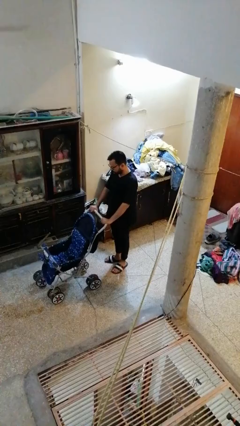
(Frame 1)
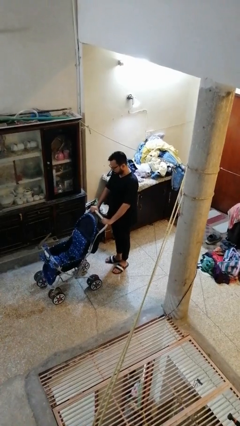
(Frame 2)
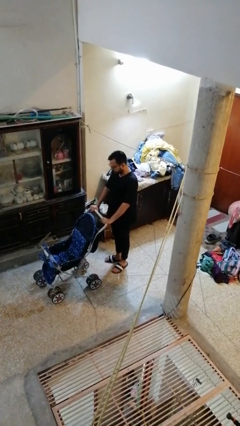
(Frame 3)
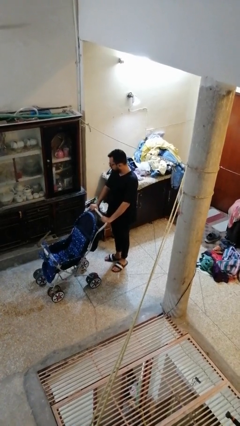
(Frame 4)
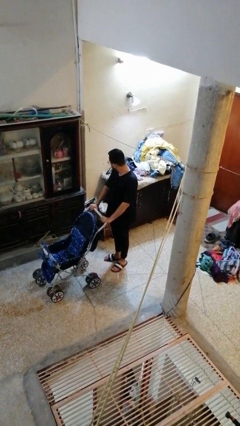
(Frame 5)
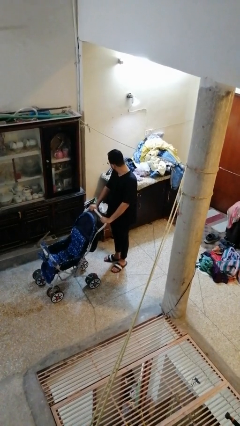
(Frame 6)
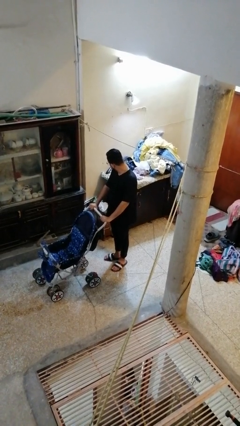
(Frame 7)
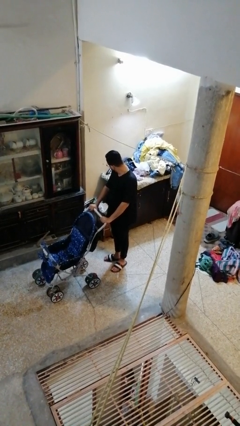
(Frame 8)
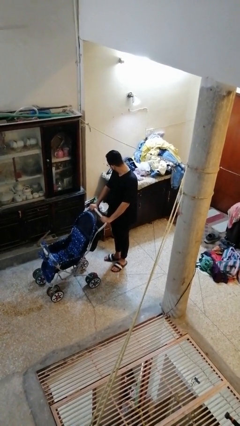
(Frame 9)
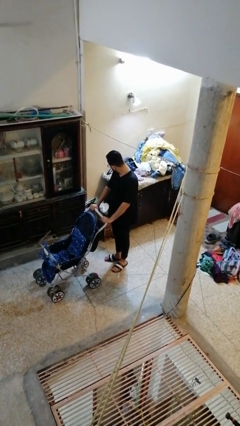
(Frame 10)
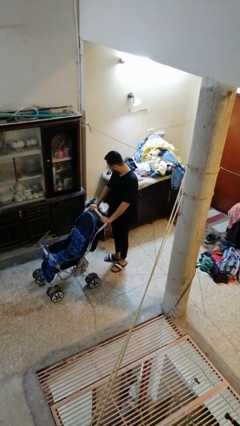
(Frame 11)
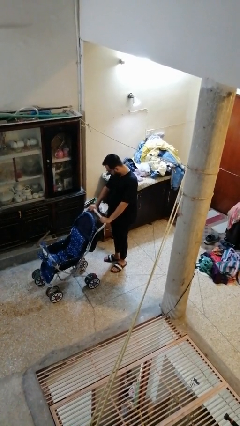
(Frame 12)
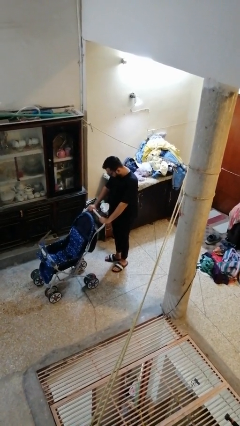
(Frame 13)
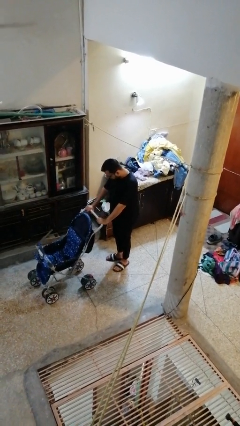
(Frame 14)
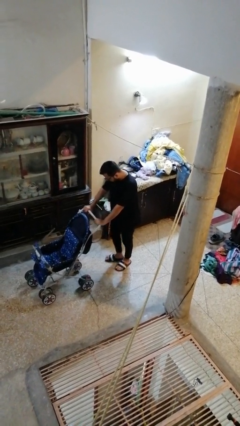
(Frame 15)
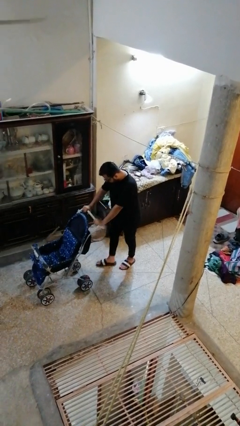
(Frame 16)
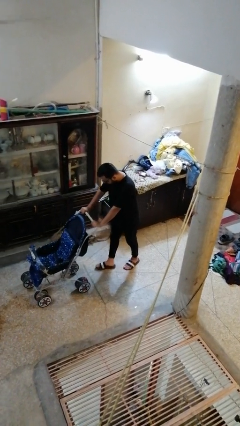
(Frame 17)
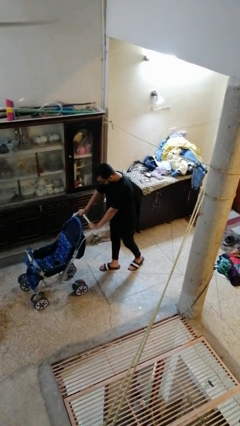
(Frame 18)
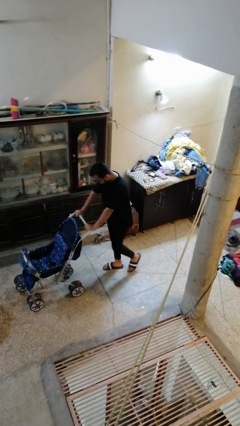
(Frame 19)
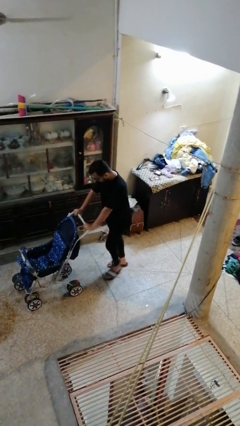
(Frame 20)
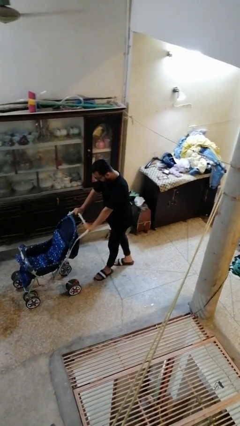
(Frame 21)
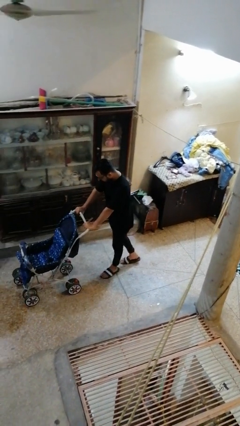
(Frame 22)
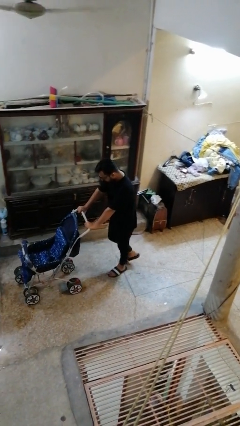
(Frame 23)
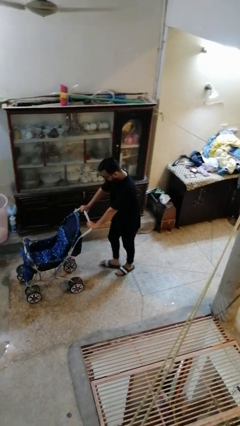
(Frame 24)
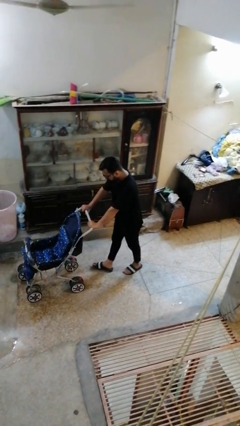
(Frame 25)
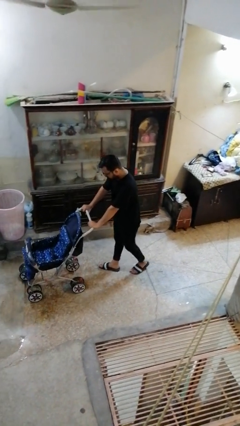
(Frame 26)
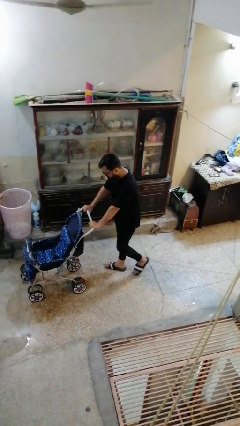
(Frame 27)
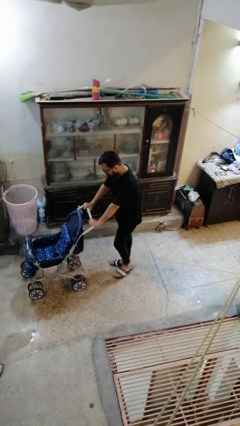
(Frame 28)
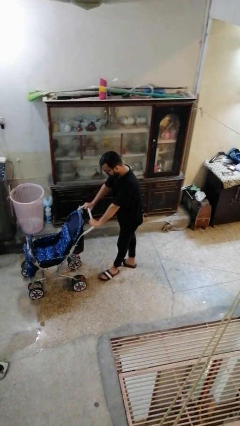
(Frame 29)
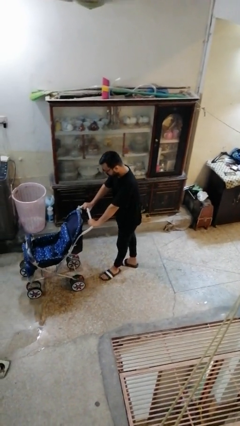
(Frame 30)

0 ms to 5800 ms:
person pushes wheeled cart

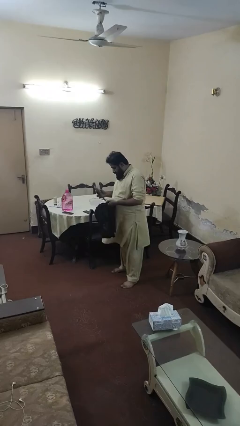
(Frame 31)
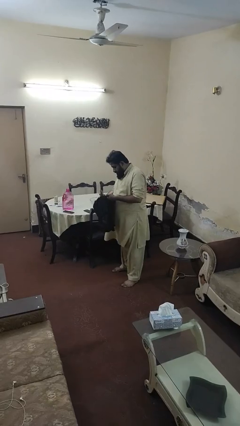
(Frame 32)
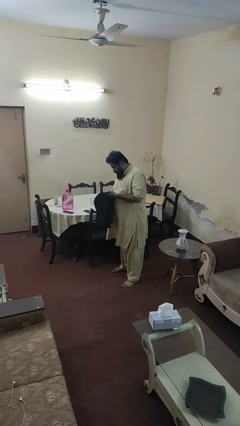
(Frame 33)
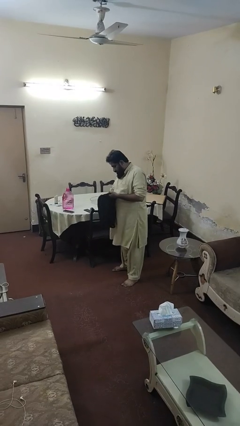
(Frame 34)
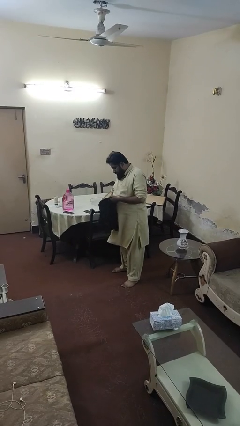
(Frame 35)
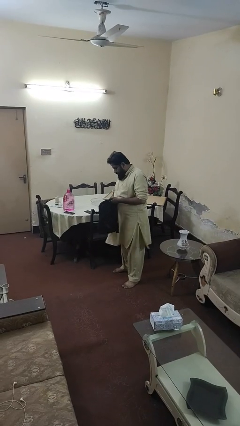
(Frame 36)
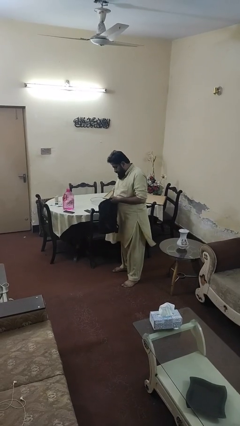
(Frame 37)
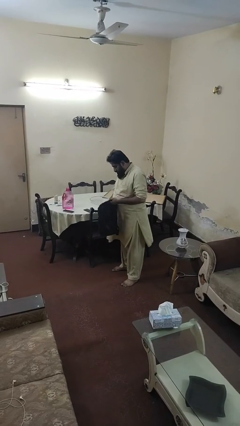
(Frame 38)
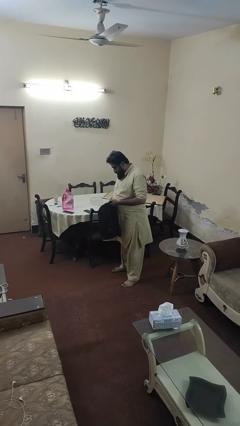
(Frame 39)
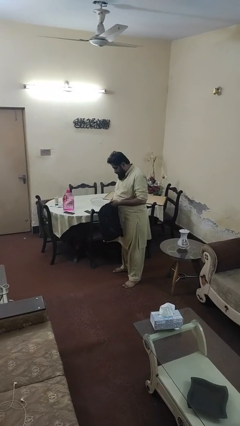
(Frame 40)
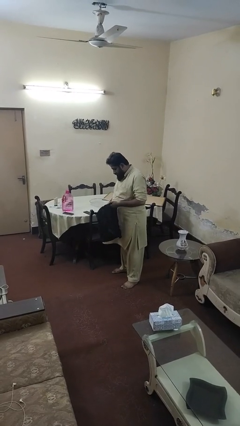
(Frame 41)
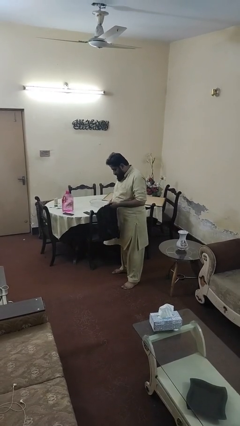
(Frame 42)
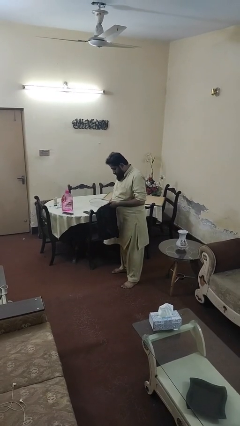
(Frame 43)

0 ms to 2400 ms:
person puts object into backpack

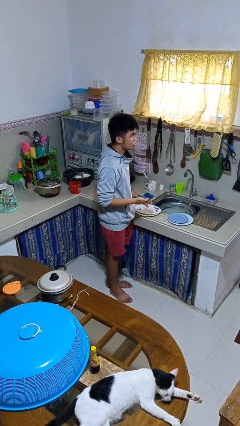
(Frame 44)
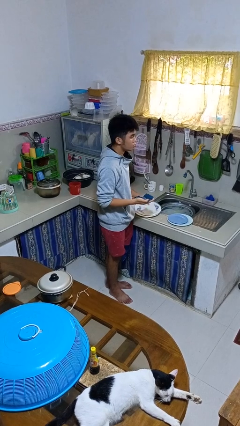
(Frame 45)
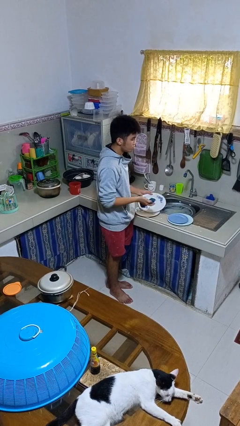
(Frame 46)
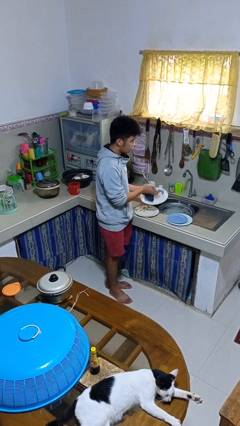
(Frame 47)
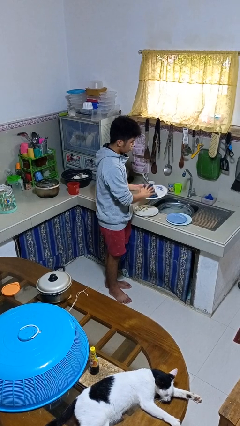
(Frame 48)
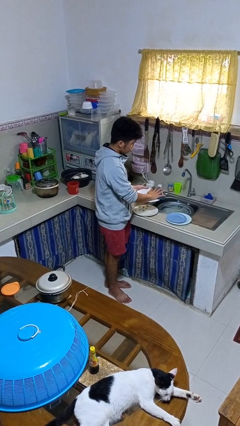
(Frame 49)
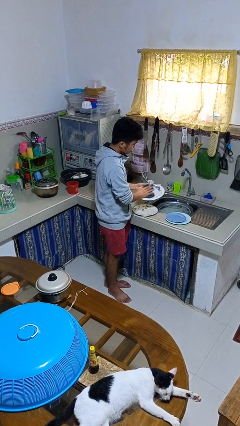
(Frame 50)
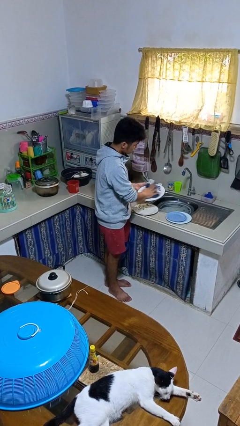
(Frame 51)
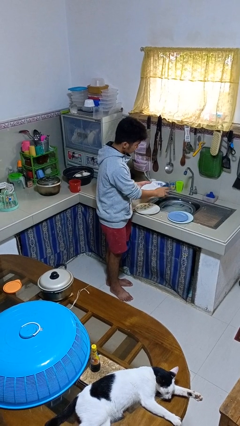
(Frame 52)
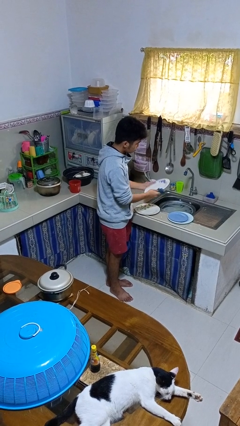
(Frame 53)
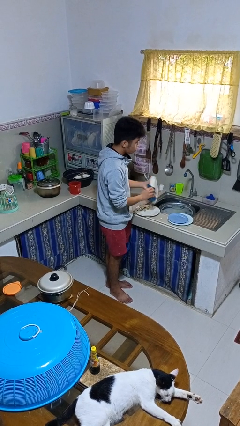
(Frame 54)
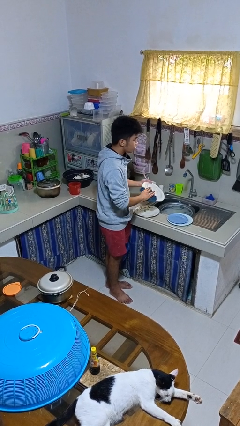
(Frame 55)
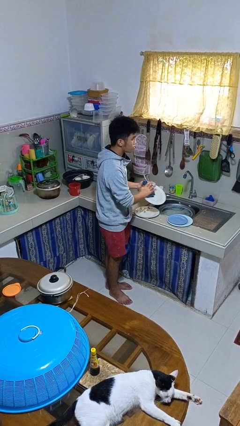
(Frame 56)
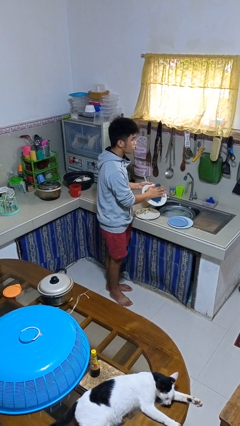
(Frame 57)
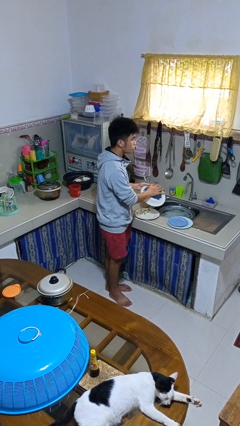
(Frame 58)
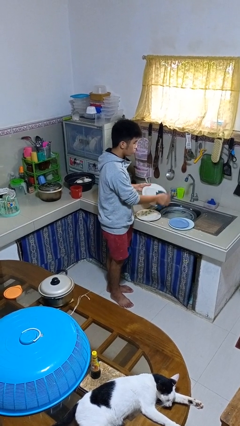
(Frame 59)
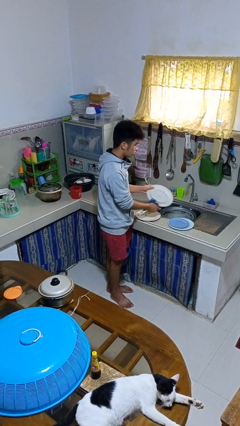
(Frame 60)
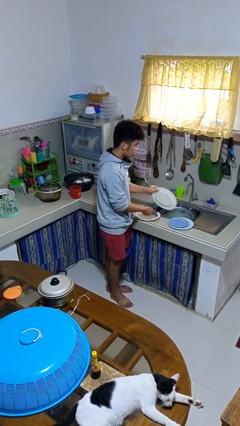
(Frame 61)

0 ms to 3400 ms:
person dries dish

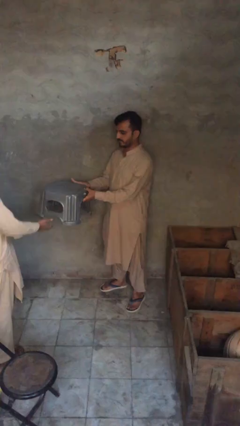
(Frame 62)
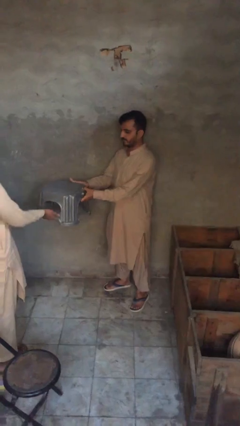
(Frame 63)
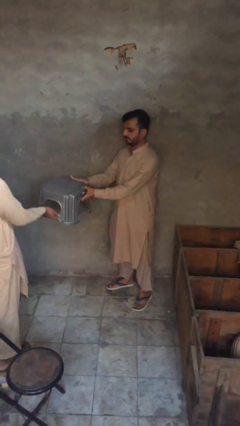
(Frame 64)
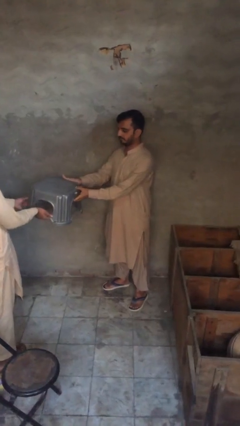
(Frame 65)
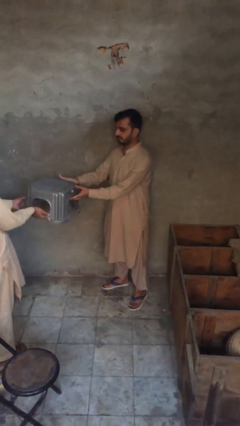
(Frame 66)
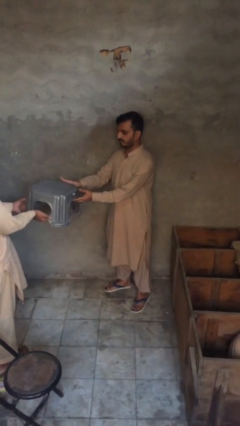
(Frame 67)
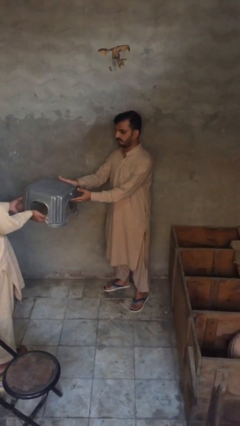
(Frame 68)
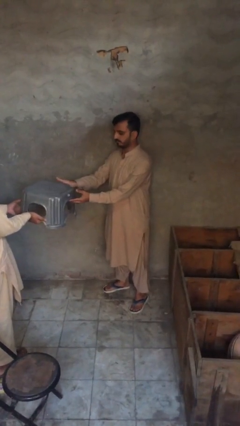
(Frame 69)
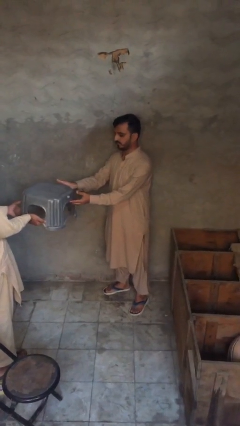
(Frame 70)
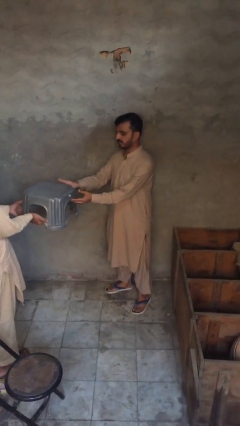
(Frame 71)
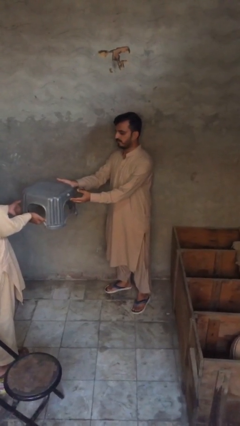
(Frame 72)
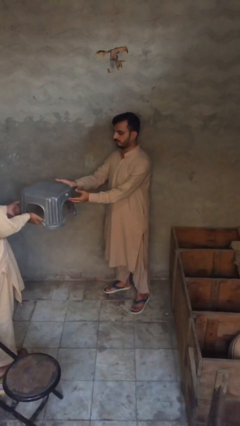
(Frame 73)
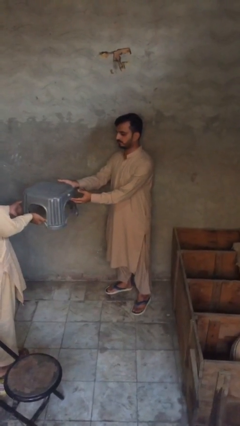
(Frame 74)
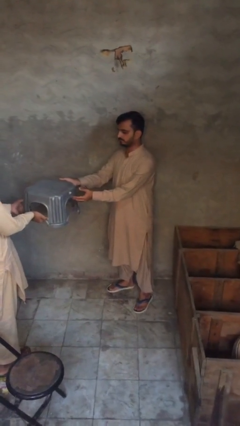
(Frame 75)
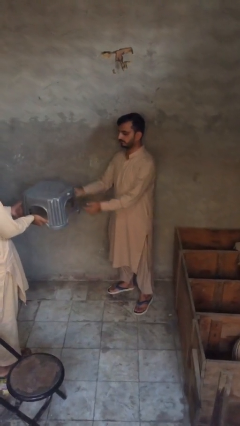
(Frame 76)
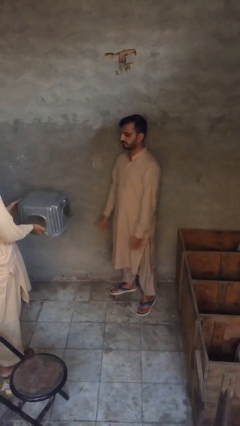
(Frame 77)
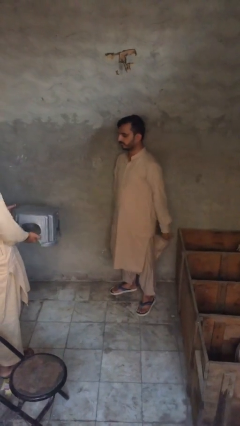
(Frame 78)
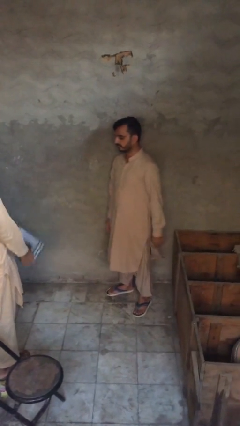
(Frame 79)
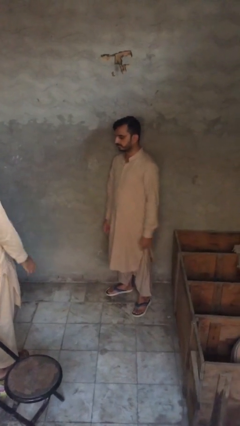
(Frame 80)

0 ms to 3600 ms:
person transfers object to person

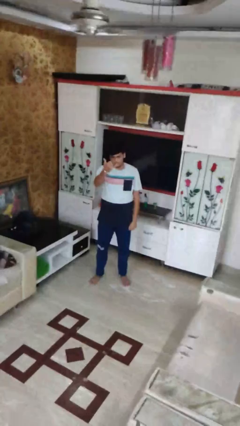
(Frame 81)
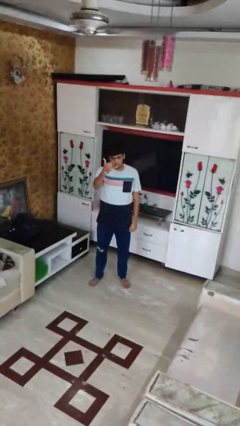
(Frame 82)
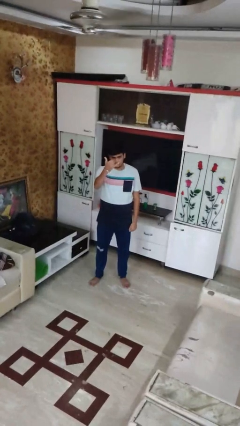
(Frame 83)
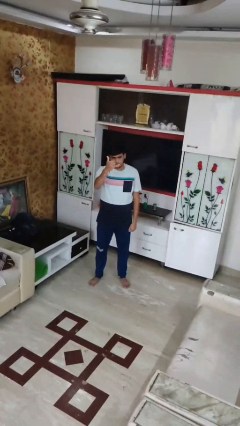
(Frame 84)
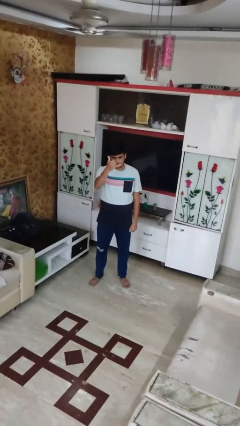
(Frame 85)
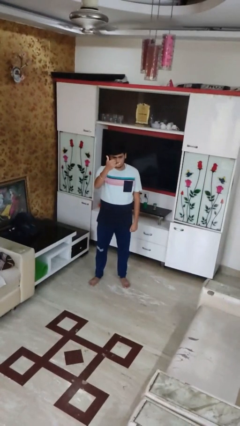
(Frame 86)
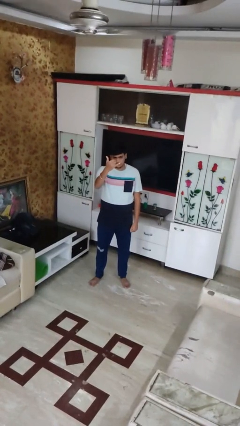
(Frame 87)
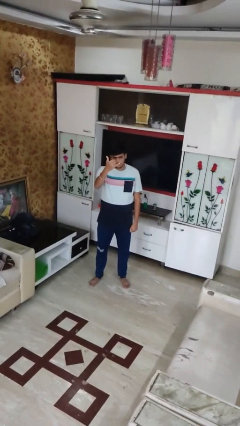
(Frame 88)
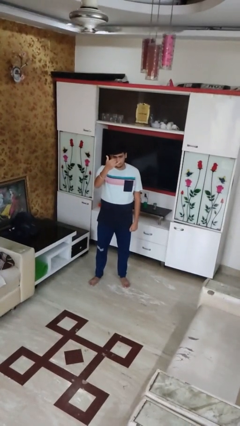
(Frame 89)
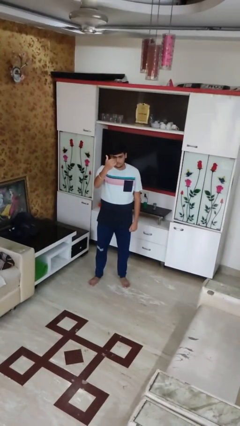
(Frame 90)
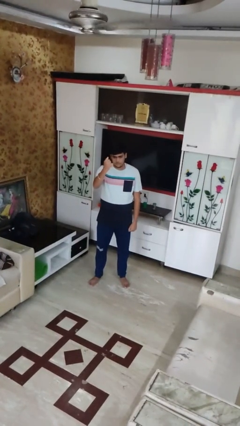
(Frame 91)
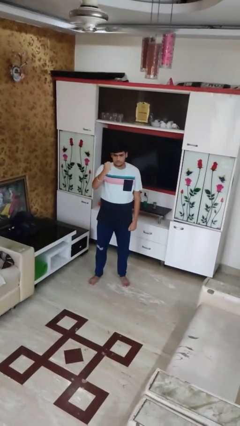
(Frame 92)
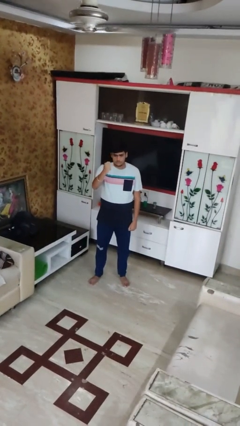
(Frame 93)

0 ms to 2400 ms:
person gestures hang loose

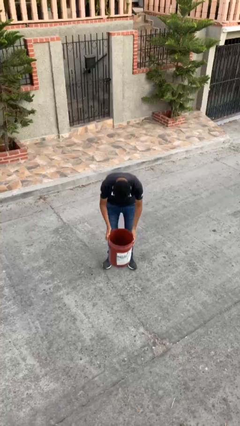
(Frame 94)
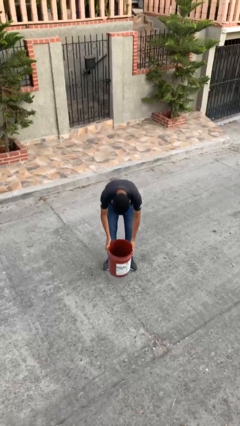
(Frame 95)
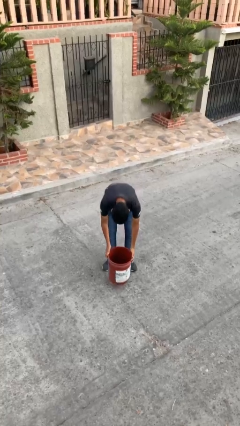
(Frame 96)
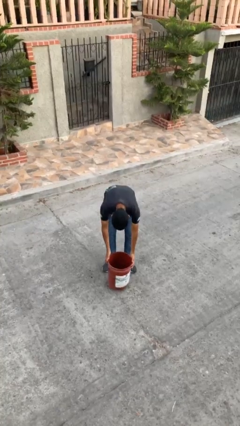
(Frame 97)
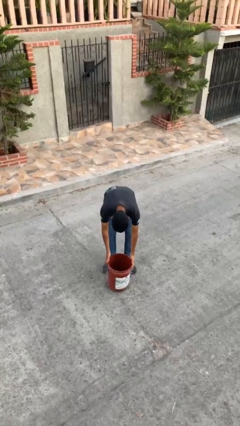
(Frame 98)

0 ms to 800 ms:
person puts down object on floor
